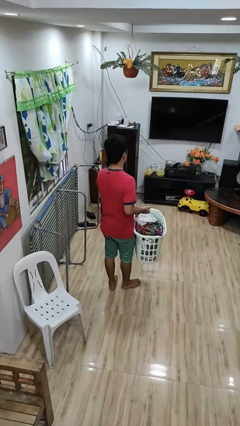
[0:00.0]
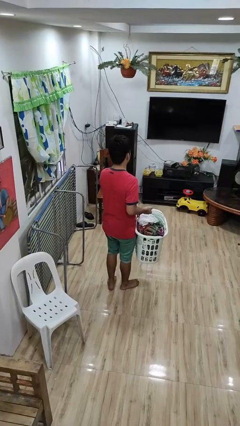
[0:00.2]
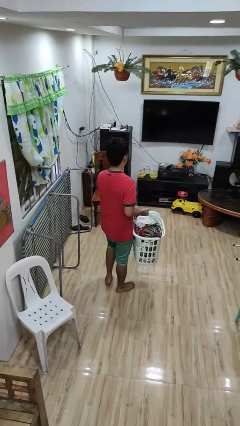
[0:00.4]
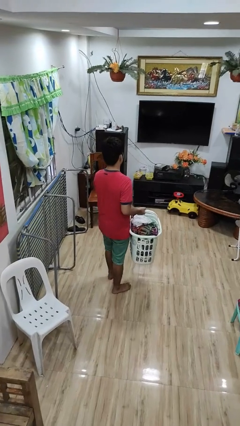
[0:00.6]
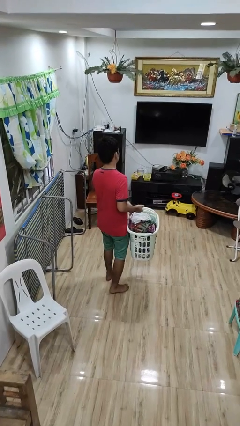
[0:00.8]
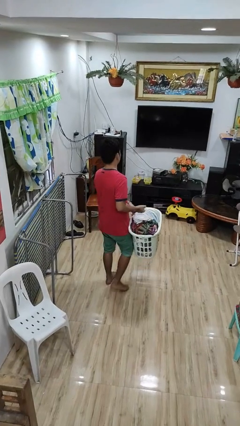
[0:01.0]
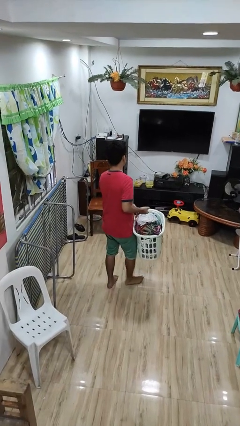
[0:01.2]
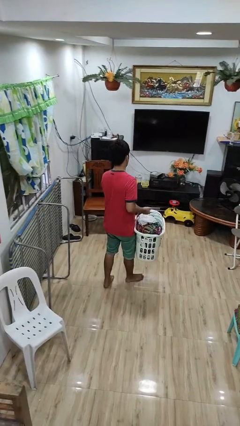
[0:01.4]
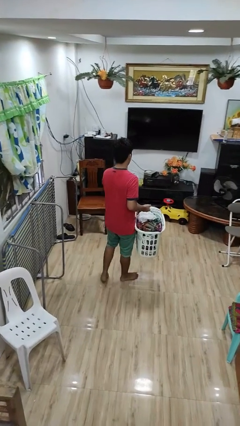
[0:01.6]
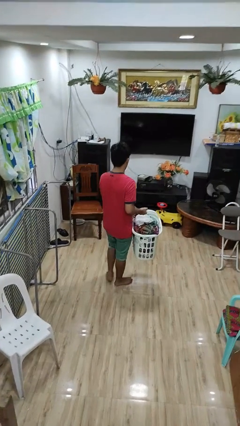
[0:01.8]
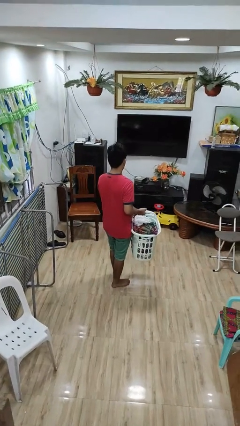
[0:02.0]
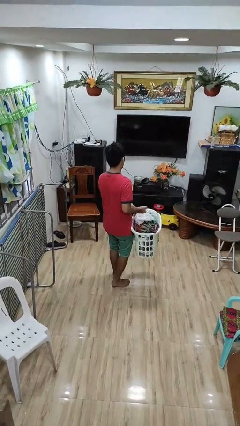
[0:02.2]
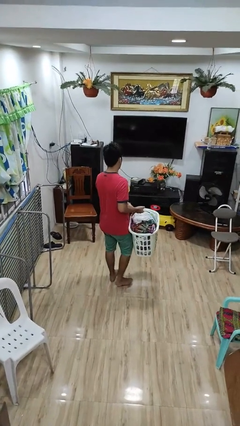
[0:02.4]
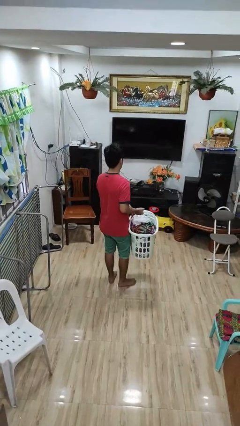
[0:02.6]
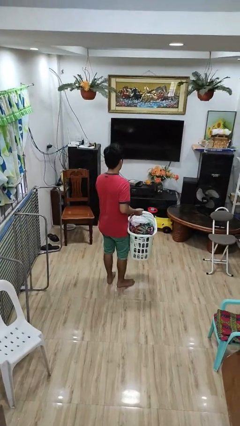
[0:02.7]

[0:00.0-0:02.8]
person carries laundry basket

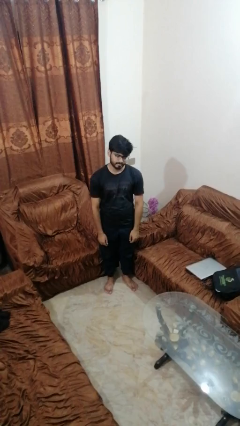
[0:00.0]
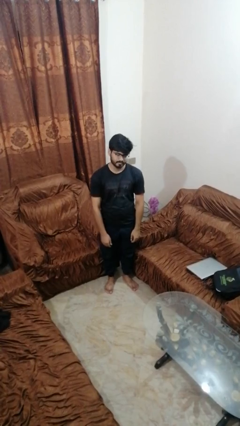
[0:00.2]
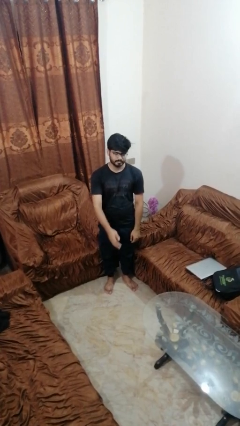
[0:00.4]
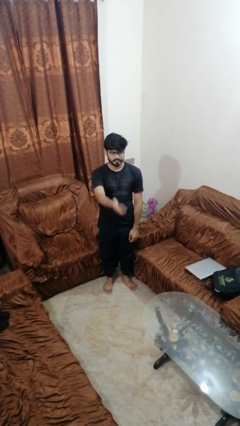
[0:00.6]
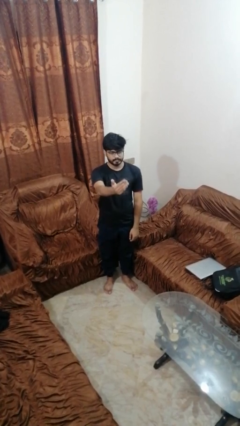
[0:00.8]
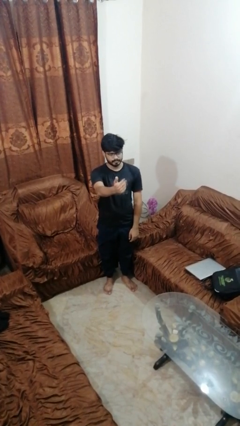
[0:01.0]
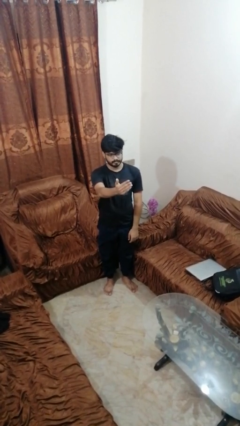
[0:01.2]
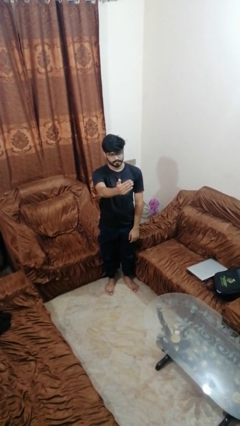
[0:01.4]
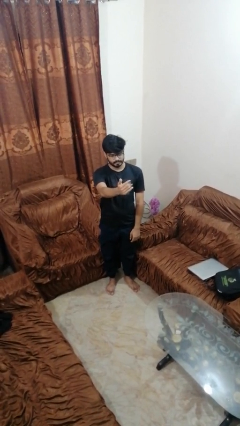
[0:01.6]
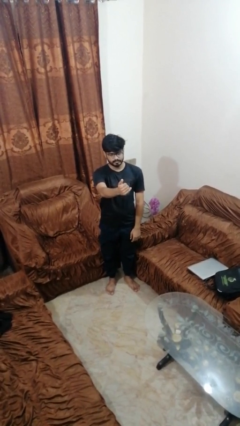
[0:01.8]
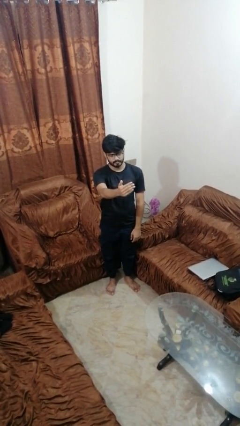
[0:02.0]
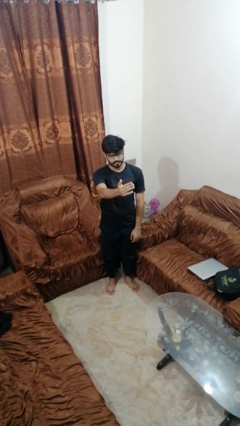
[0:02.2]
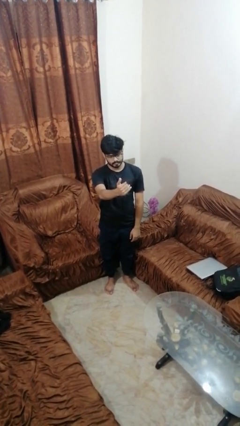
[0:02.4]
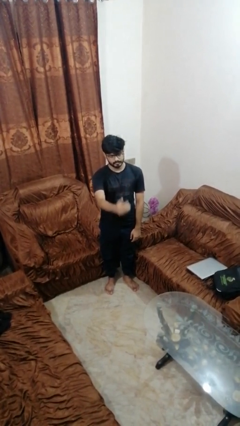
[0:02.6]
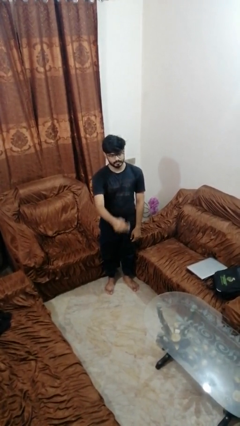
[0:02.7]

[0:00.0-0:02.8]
person gestures come here

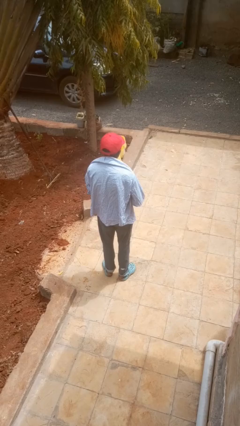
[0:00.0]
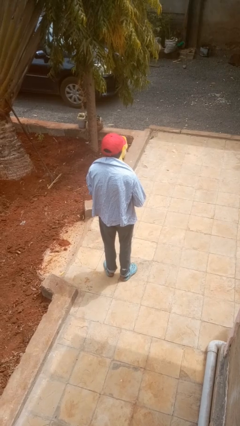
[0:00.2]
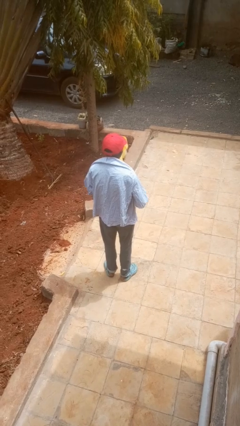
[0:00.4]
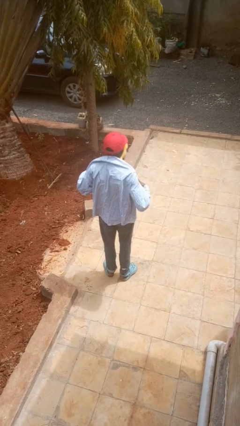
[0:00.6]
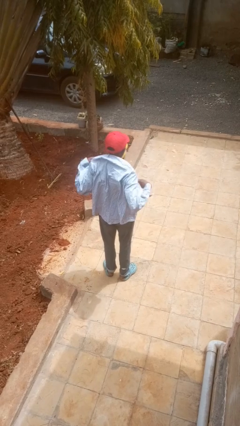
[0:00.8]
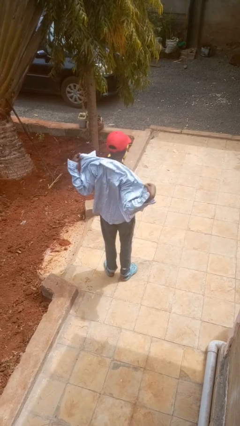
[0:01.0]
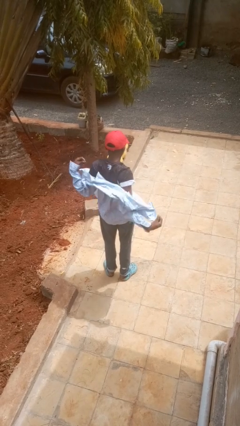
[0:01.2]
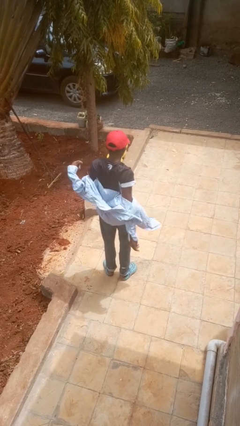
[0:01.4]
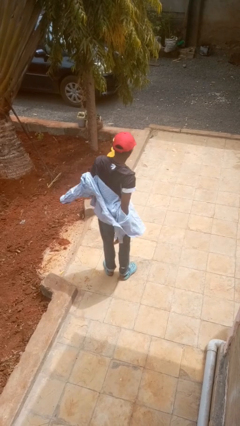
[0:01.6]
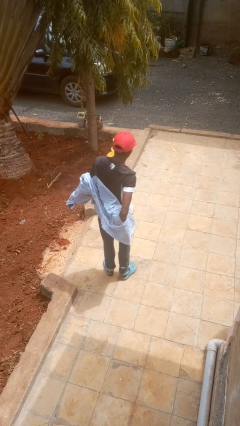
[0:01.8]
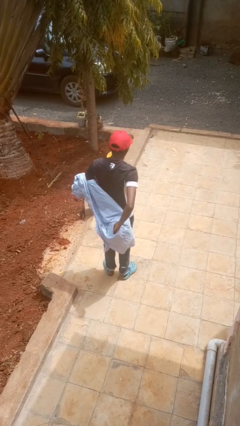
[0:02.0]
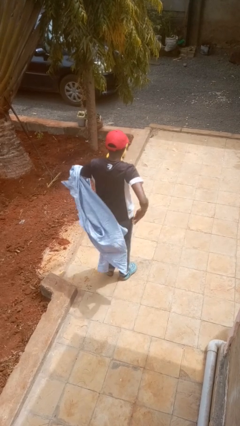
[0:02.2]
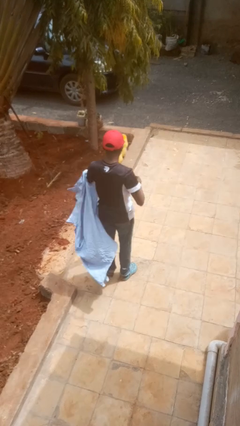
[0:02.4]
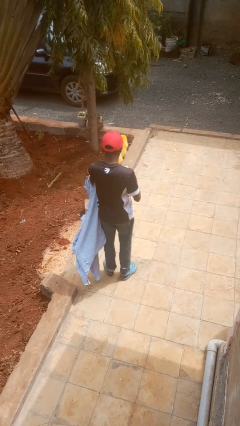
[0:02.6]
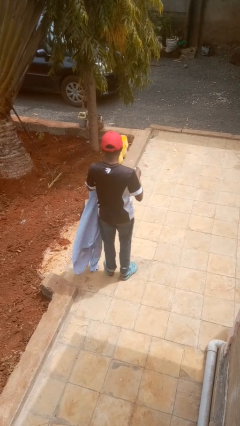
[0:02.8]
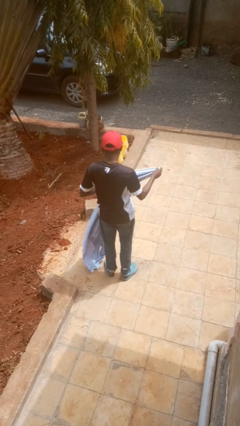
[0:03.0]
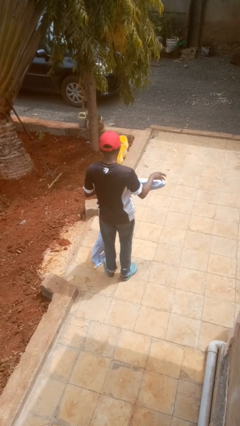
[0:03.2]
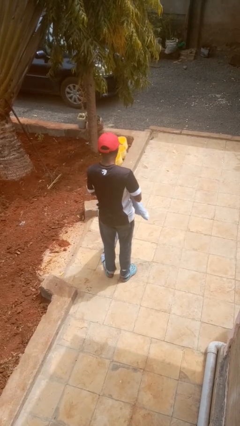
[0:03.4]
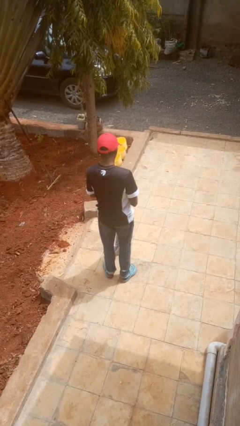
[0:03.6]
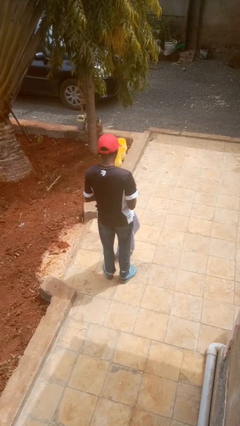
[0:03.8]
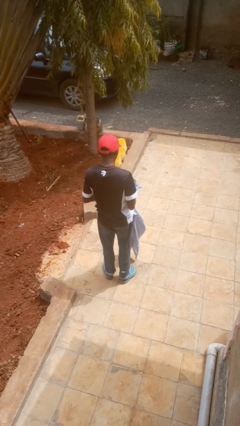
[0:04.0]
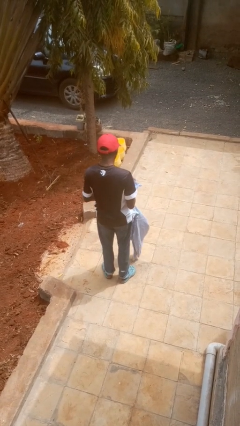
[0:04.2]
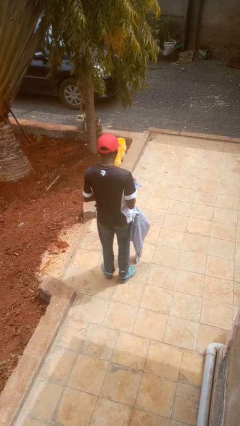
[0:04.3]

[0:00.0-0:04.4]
person takes off shirt

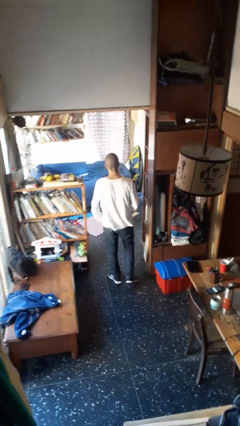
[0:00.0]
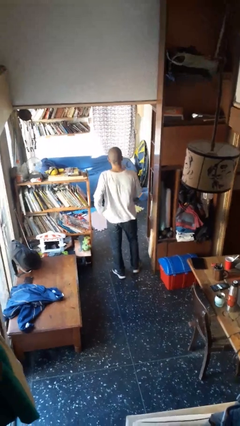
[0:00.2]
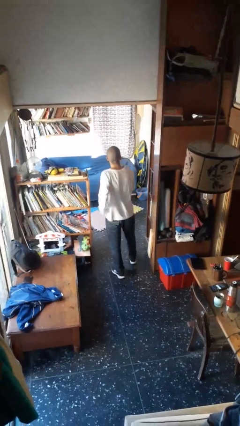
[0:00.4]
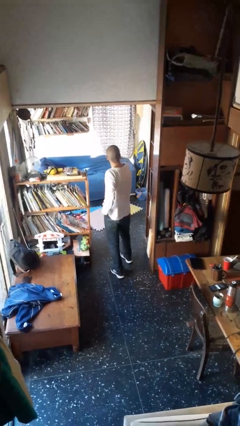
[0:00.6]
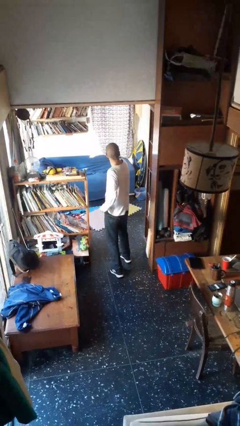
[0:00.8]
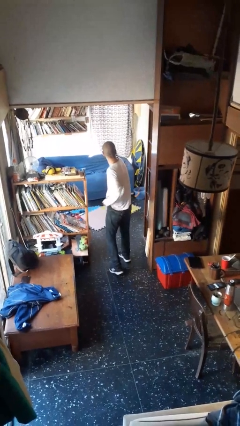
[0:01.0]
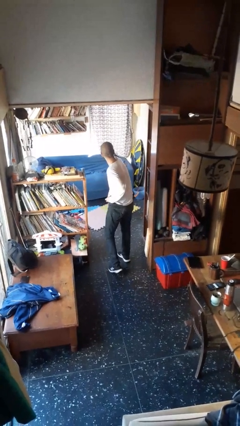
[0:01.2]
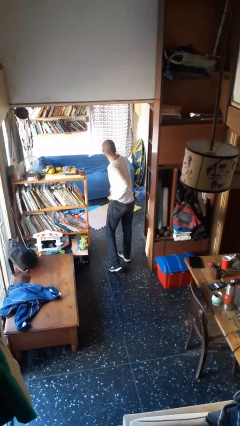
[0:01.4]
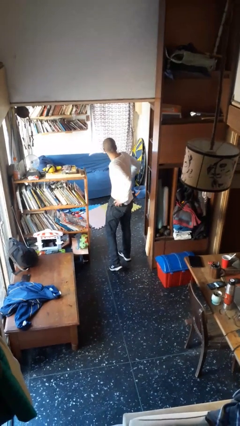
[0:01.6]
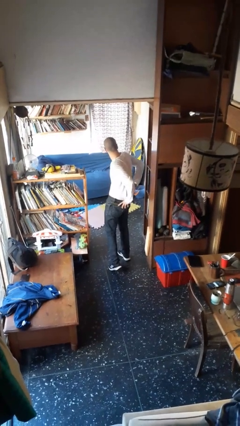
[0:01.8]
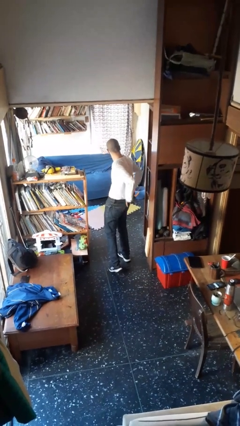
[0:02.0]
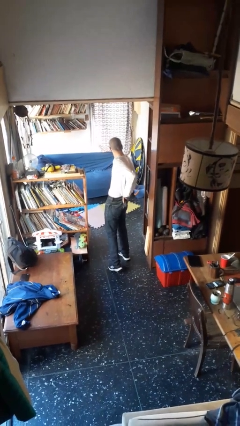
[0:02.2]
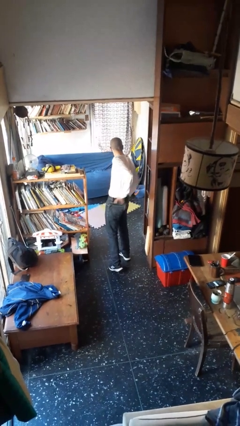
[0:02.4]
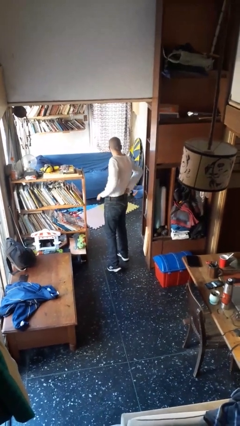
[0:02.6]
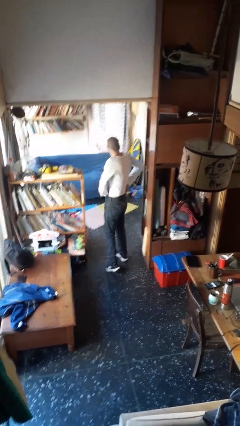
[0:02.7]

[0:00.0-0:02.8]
person tucks in shirt

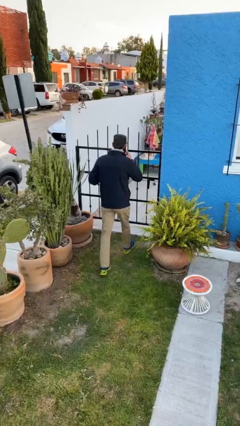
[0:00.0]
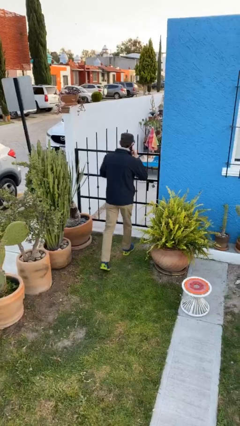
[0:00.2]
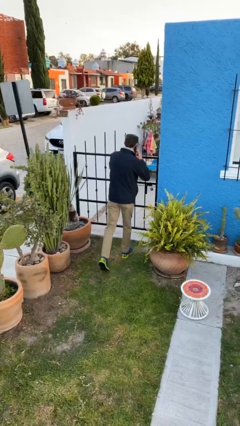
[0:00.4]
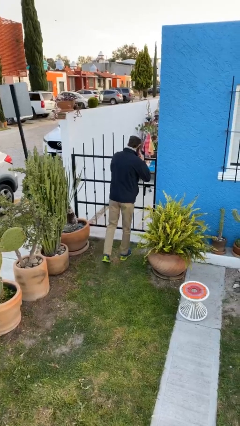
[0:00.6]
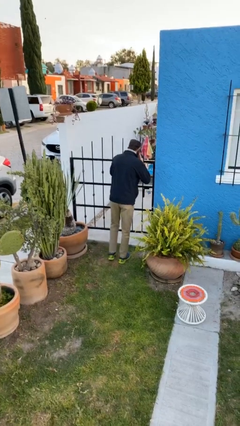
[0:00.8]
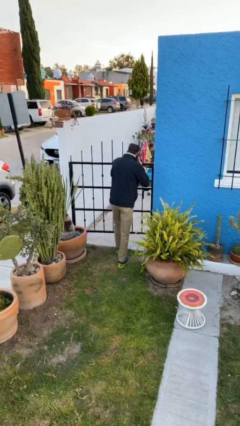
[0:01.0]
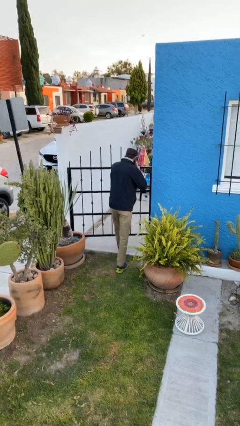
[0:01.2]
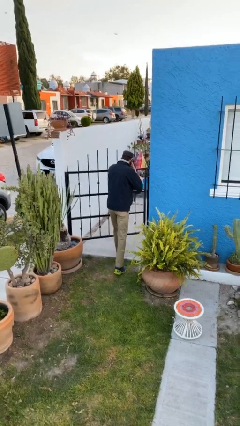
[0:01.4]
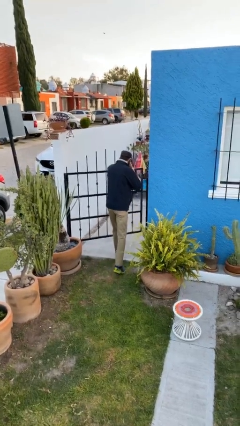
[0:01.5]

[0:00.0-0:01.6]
person opens facility door

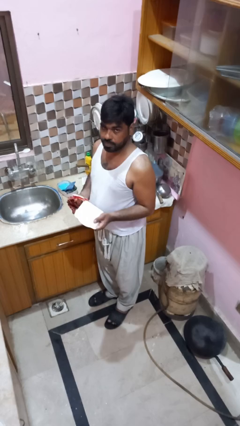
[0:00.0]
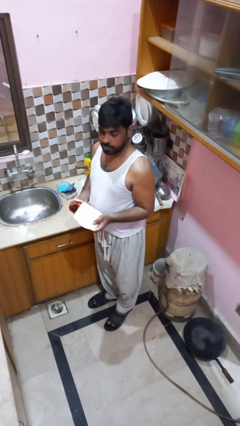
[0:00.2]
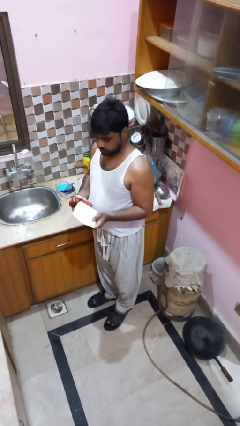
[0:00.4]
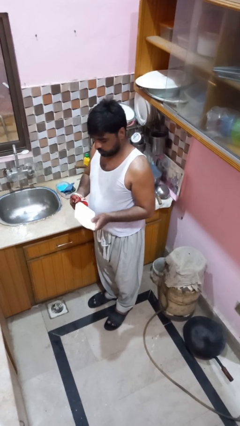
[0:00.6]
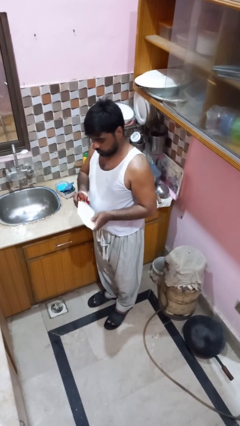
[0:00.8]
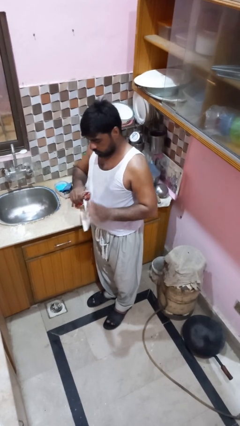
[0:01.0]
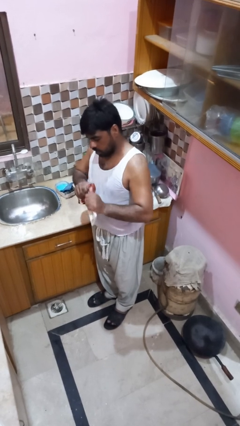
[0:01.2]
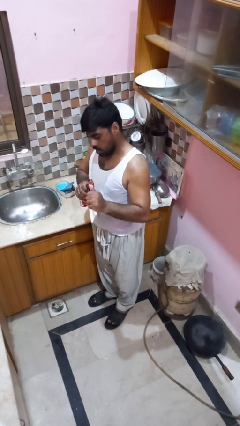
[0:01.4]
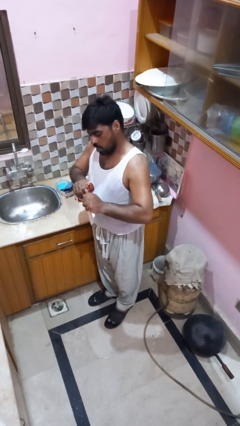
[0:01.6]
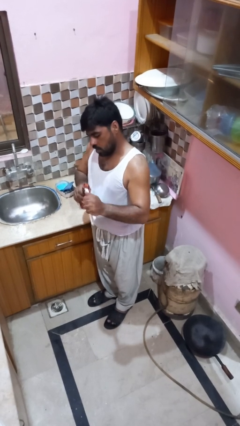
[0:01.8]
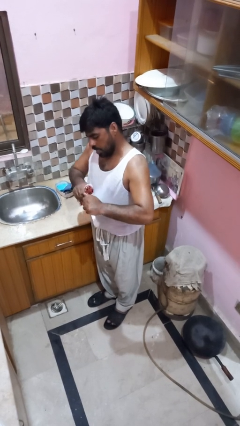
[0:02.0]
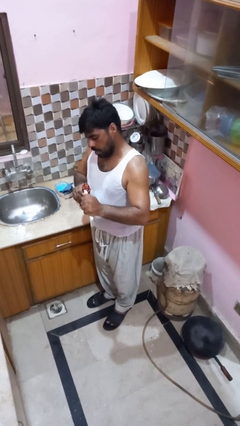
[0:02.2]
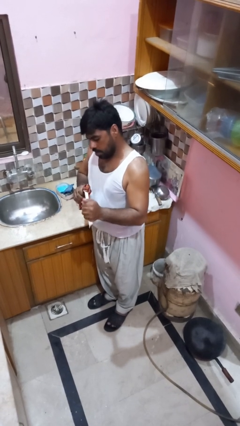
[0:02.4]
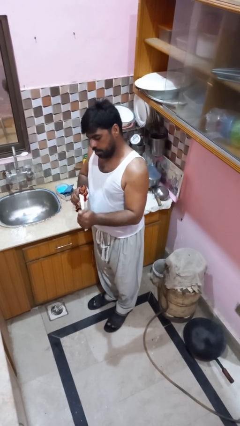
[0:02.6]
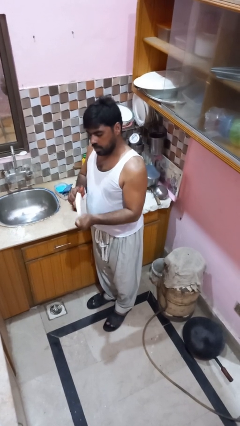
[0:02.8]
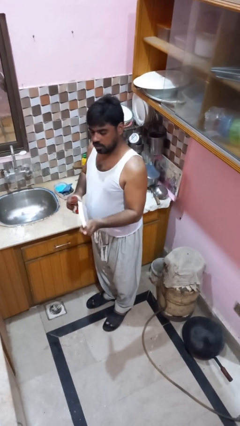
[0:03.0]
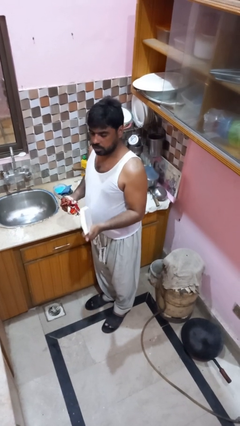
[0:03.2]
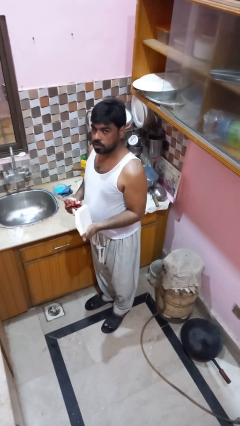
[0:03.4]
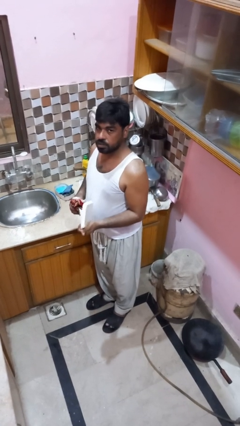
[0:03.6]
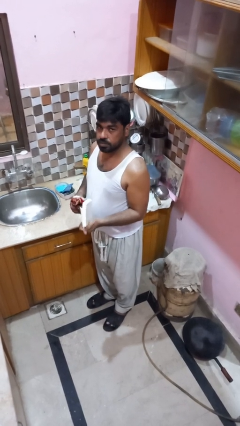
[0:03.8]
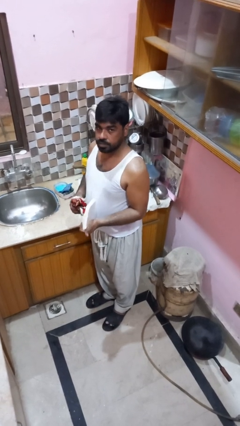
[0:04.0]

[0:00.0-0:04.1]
person dries dish
